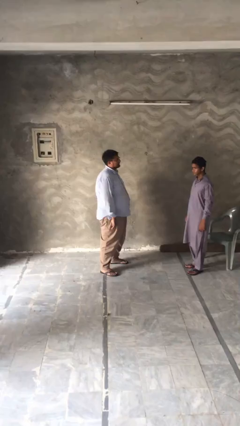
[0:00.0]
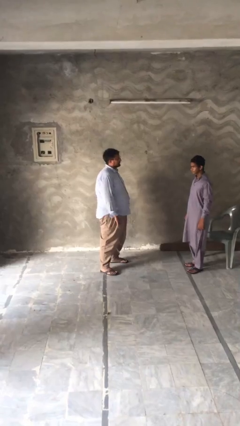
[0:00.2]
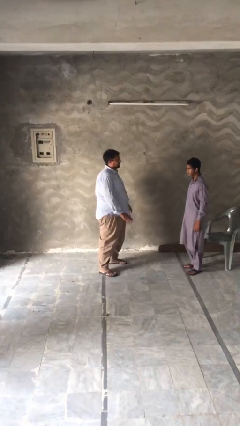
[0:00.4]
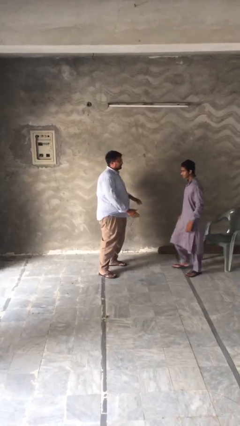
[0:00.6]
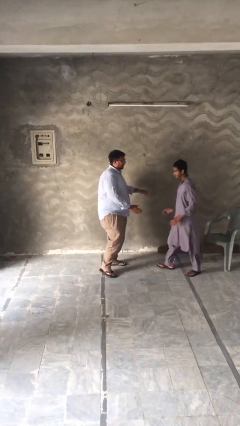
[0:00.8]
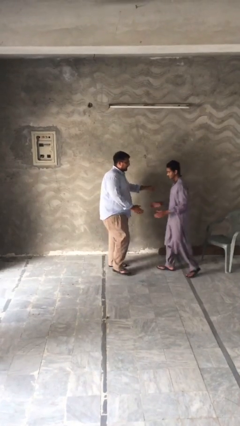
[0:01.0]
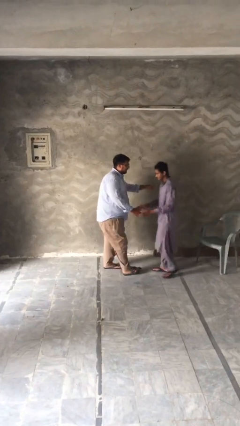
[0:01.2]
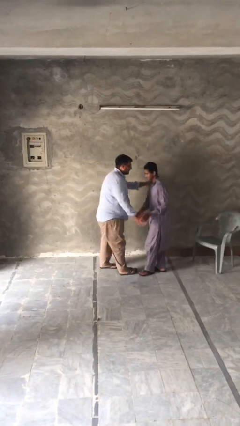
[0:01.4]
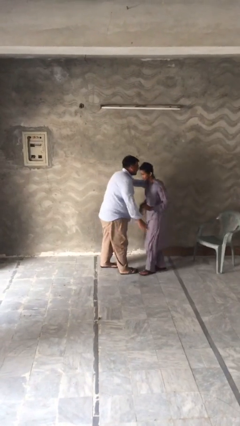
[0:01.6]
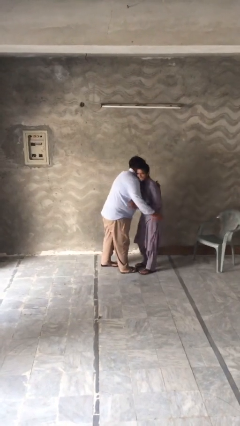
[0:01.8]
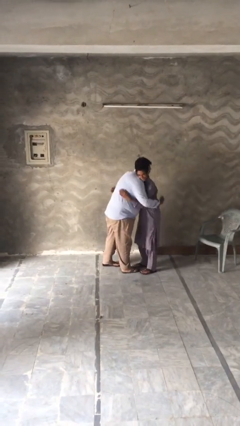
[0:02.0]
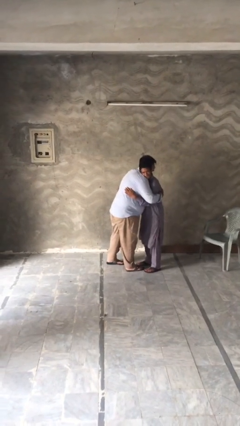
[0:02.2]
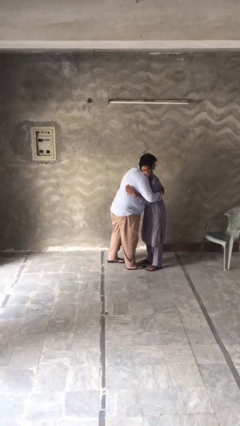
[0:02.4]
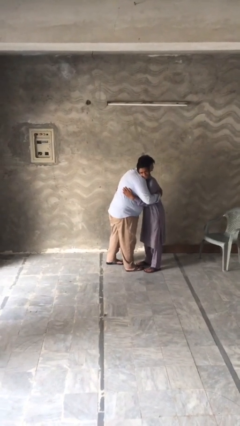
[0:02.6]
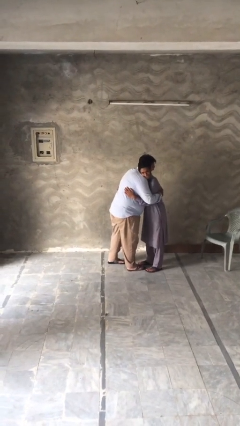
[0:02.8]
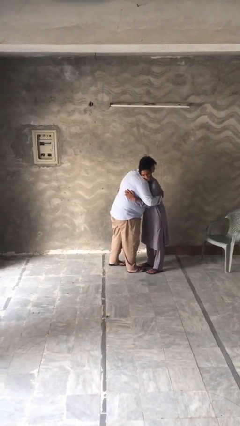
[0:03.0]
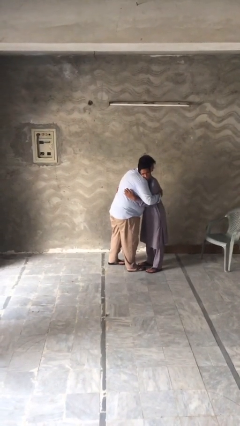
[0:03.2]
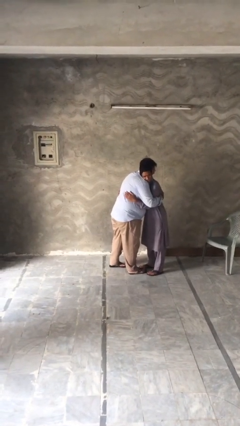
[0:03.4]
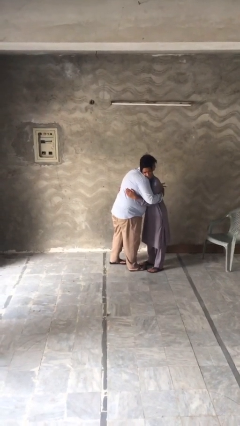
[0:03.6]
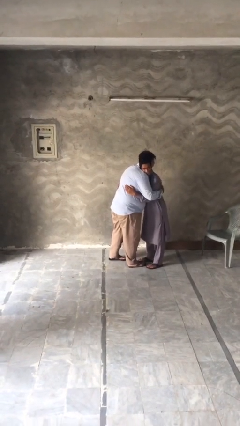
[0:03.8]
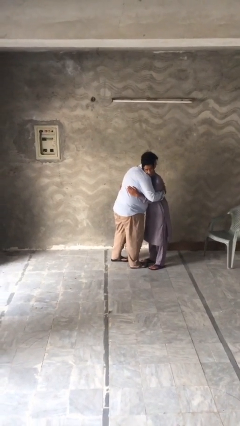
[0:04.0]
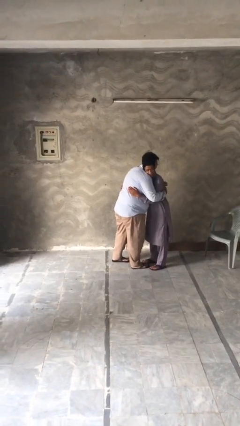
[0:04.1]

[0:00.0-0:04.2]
person embraces person

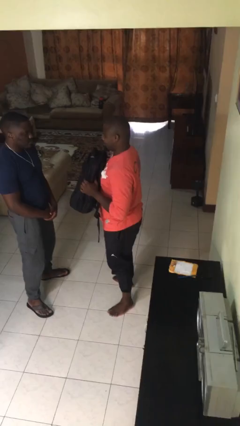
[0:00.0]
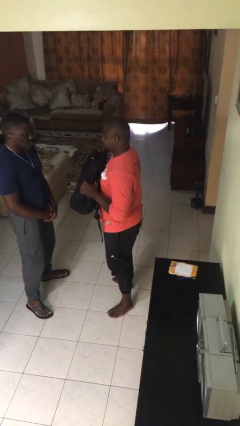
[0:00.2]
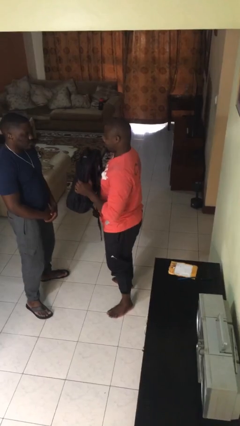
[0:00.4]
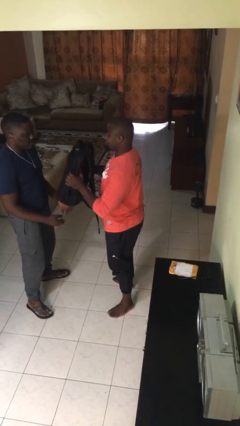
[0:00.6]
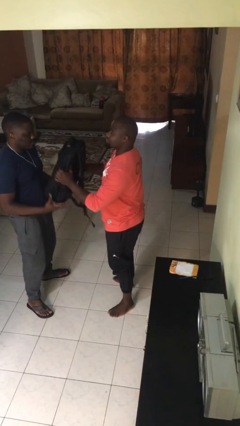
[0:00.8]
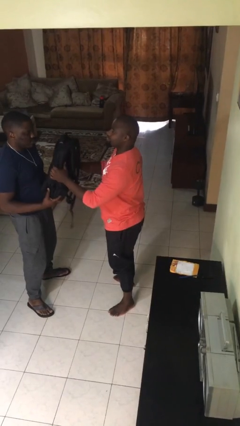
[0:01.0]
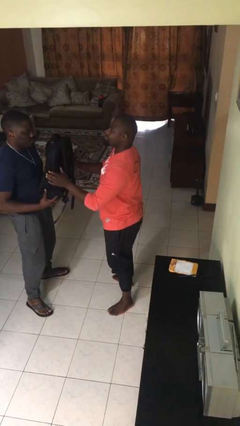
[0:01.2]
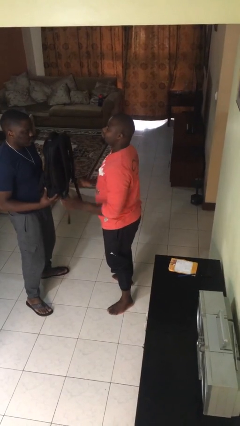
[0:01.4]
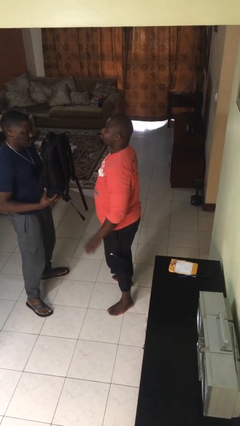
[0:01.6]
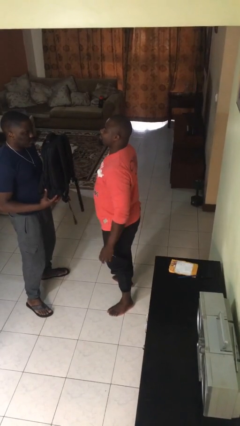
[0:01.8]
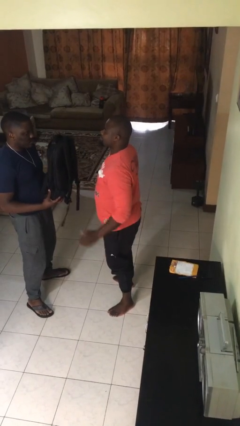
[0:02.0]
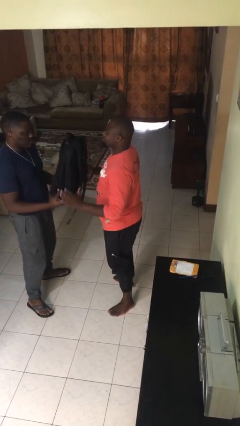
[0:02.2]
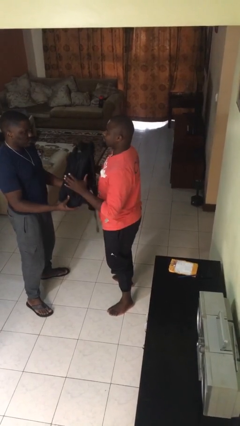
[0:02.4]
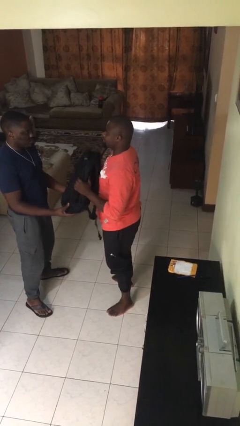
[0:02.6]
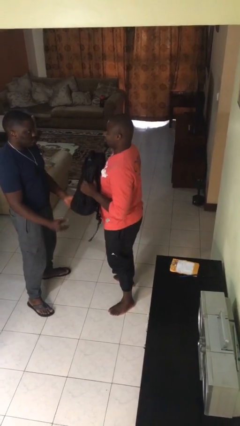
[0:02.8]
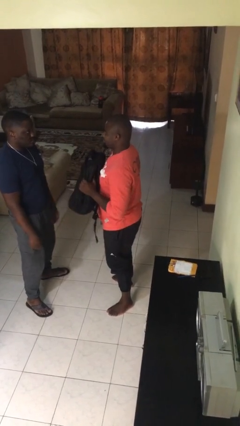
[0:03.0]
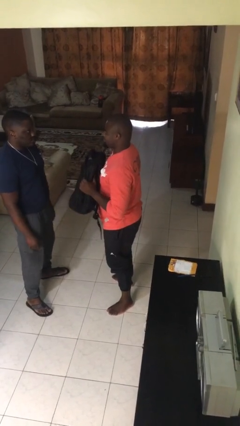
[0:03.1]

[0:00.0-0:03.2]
person transfers object to person

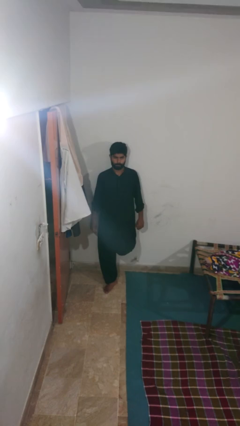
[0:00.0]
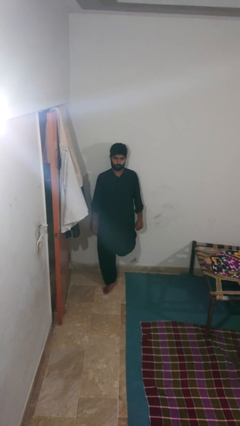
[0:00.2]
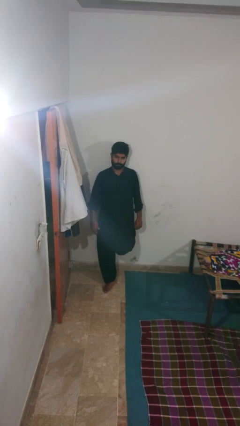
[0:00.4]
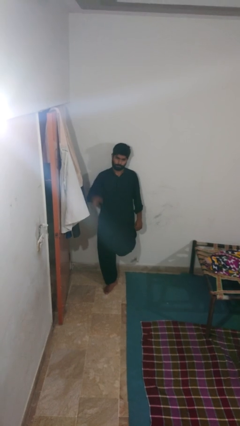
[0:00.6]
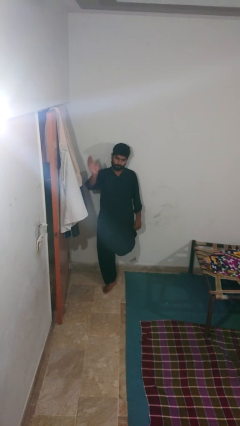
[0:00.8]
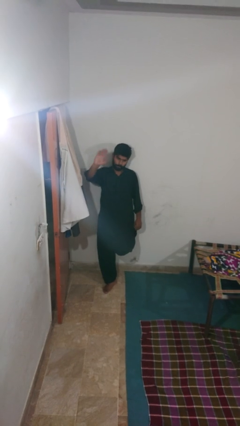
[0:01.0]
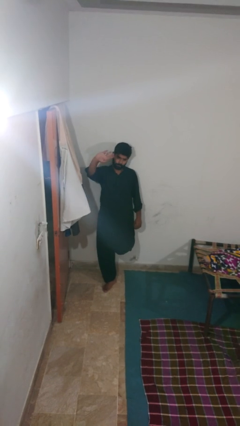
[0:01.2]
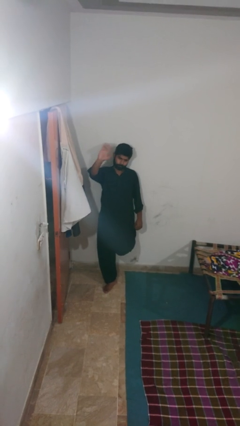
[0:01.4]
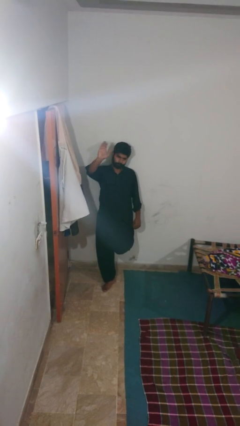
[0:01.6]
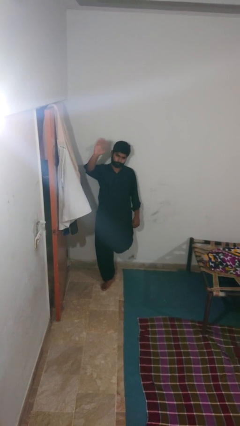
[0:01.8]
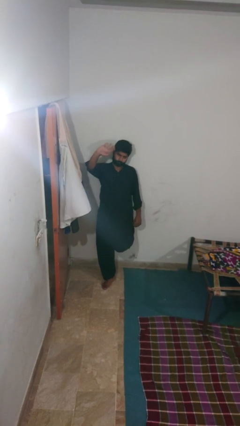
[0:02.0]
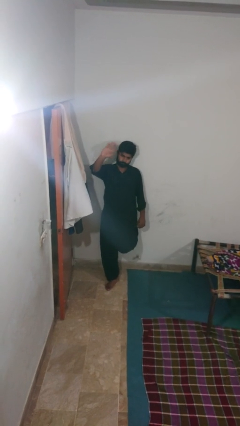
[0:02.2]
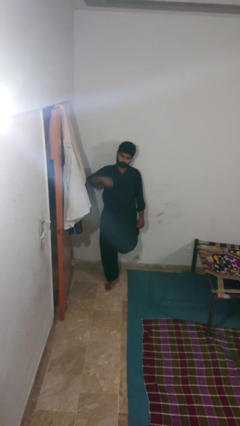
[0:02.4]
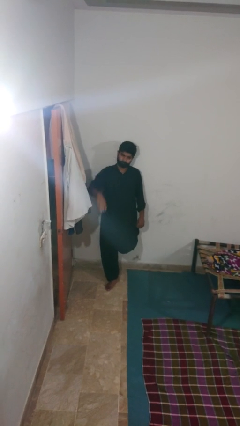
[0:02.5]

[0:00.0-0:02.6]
person waves at person

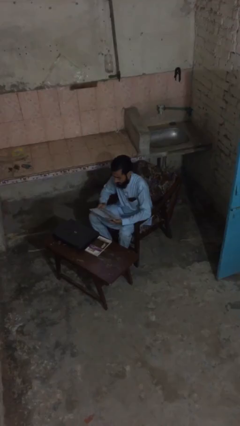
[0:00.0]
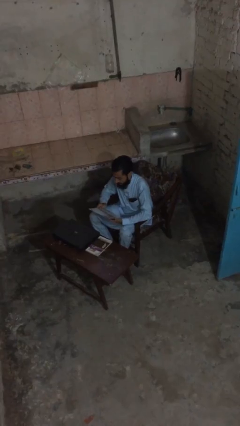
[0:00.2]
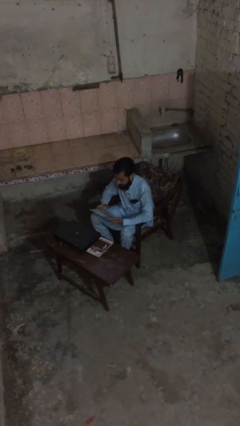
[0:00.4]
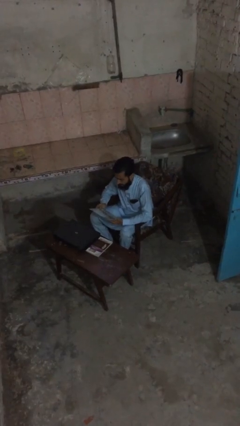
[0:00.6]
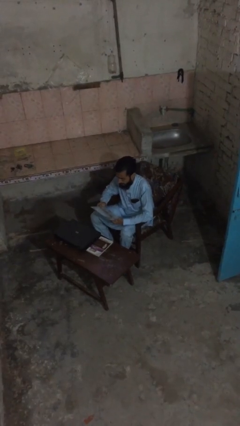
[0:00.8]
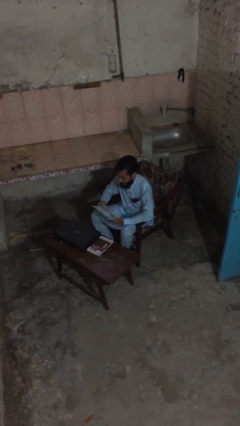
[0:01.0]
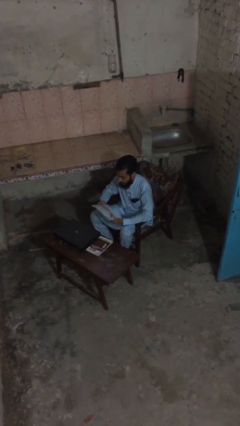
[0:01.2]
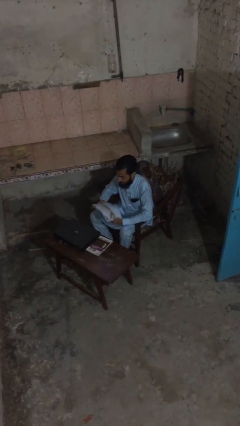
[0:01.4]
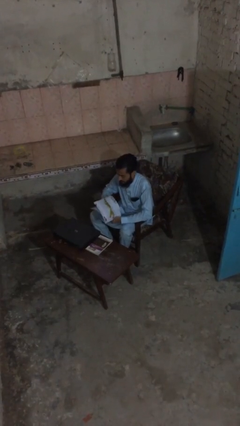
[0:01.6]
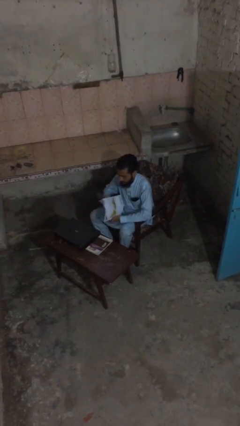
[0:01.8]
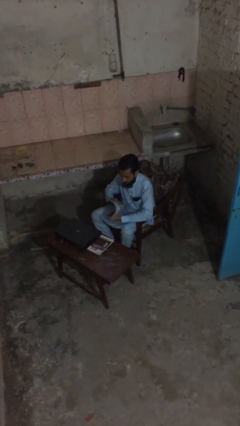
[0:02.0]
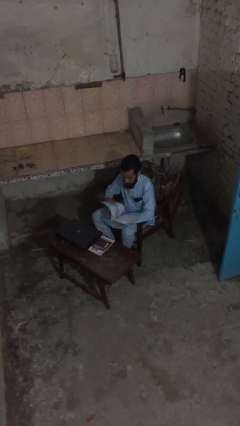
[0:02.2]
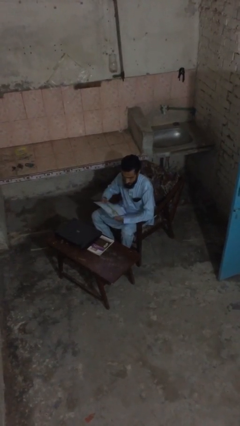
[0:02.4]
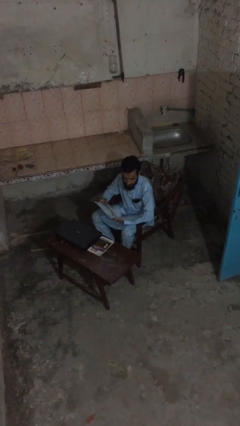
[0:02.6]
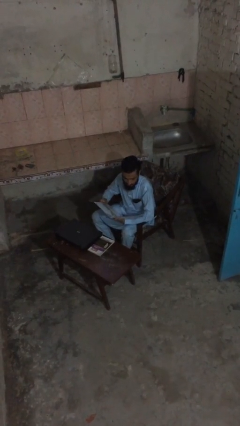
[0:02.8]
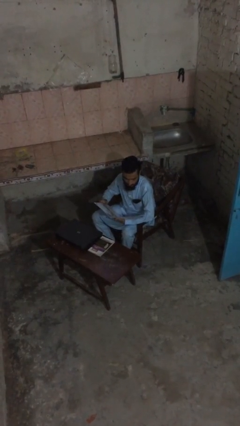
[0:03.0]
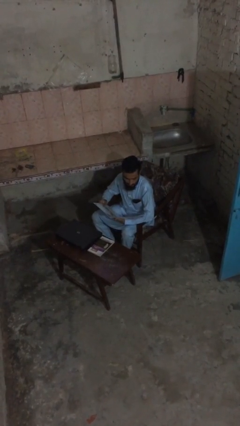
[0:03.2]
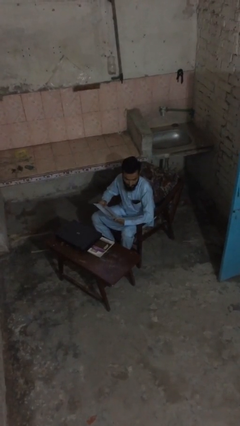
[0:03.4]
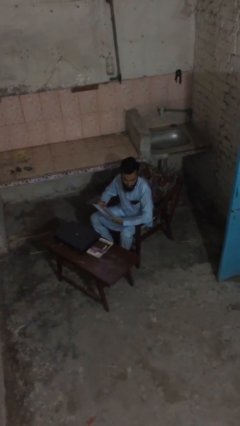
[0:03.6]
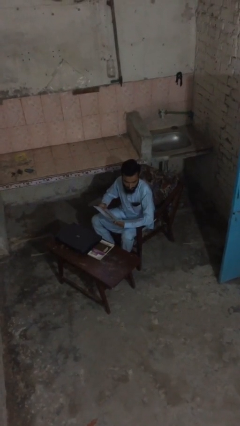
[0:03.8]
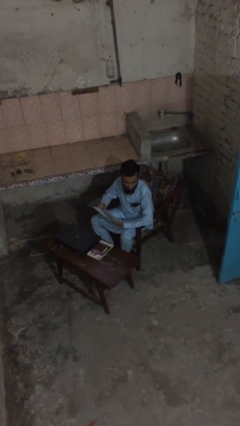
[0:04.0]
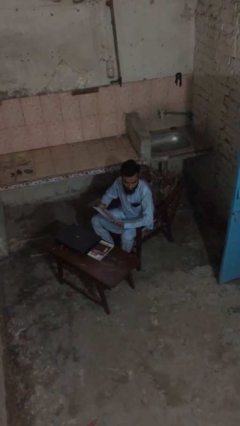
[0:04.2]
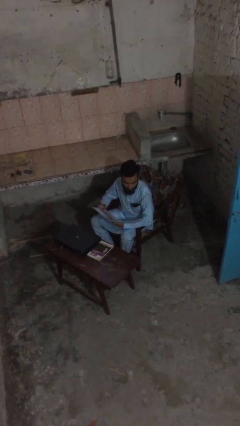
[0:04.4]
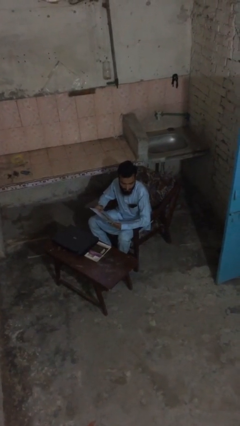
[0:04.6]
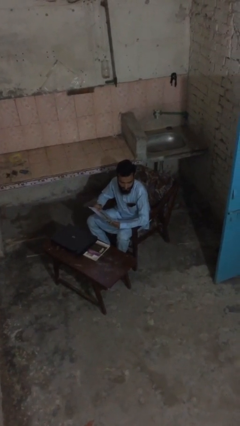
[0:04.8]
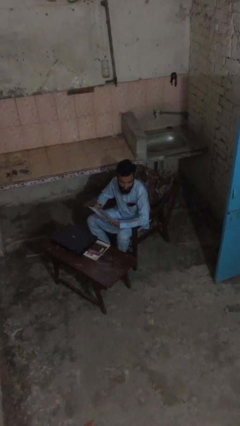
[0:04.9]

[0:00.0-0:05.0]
person reads document

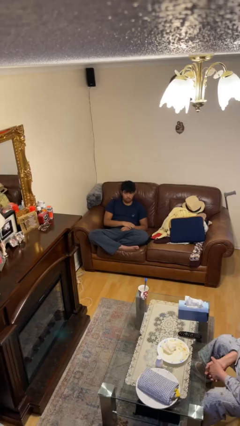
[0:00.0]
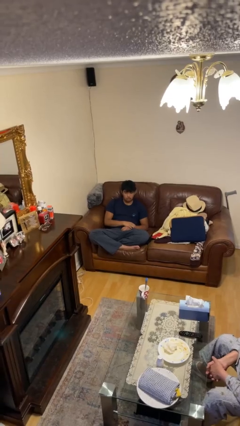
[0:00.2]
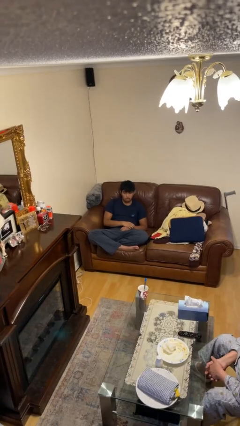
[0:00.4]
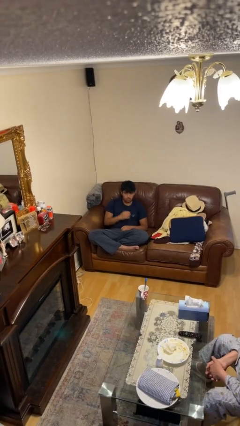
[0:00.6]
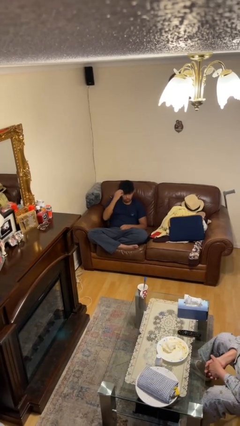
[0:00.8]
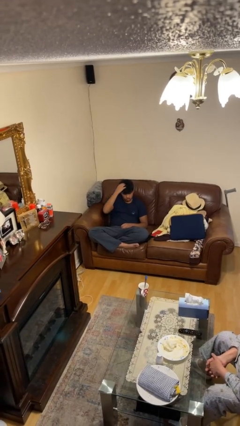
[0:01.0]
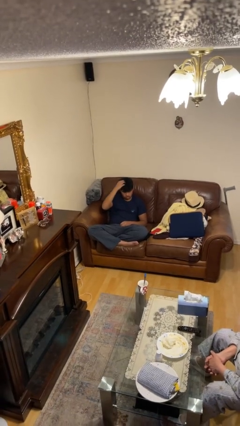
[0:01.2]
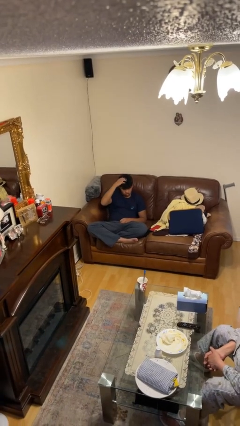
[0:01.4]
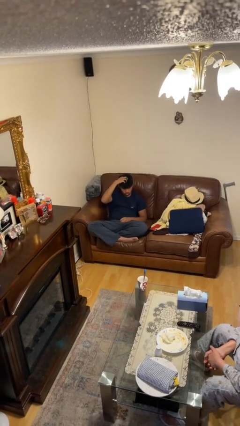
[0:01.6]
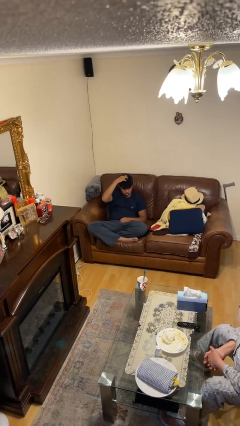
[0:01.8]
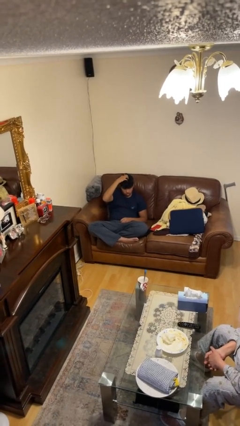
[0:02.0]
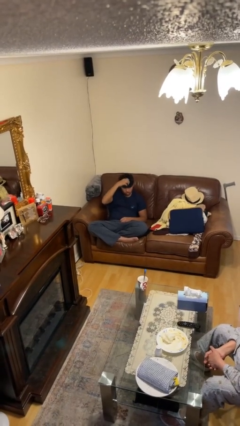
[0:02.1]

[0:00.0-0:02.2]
person strokes hair

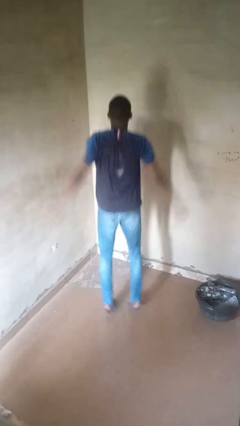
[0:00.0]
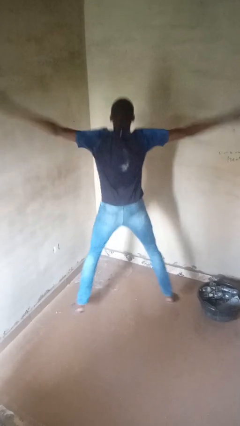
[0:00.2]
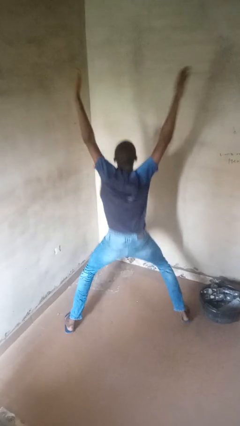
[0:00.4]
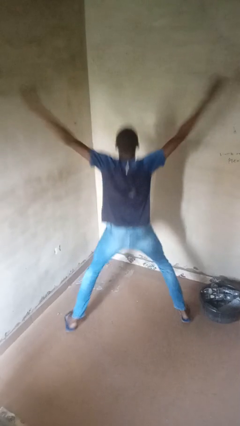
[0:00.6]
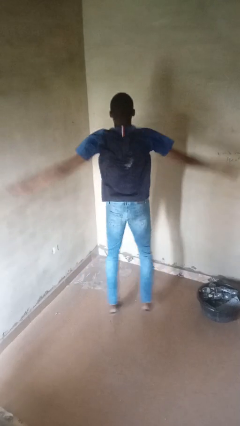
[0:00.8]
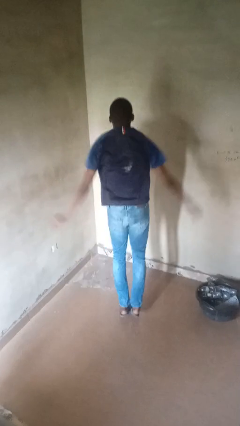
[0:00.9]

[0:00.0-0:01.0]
person exercises with jumping jacks
